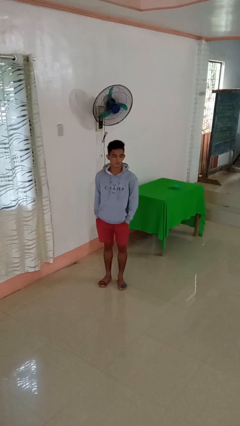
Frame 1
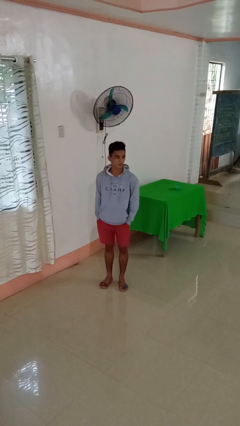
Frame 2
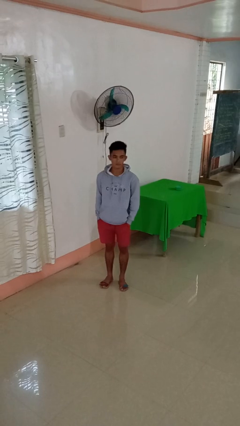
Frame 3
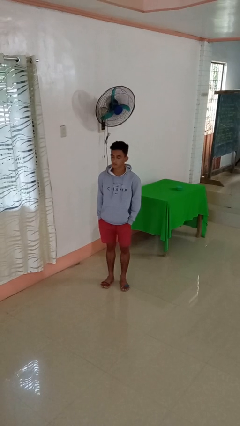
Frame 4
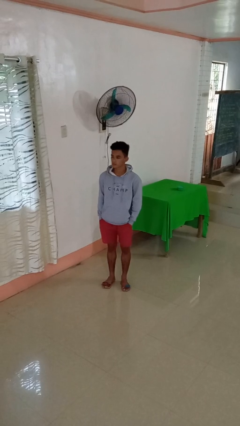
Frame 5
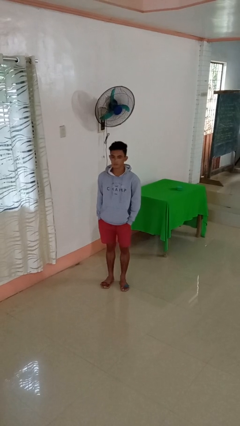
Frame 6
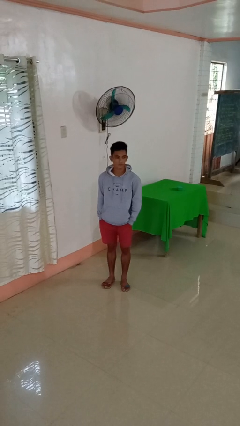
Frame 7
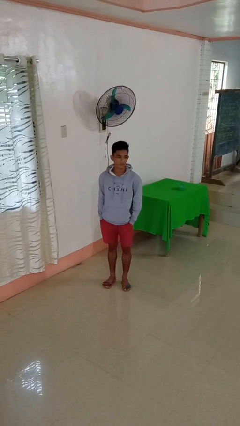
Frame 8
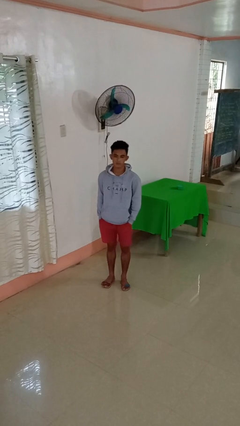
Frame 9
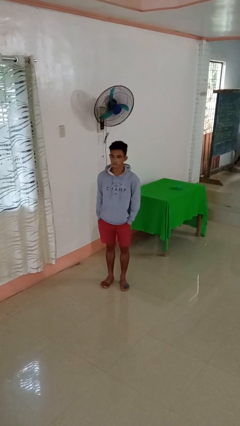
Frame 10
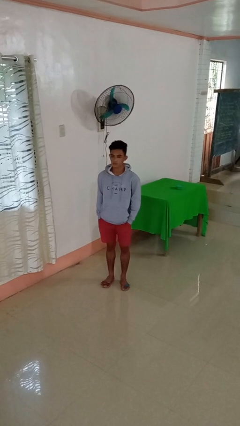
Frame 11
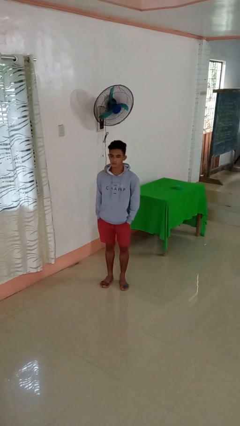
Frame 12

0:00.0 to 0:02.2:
person shakes head

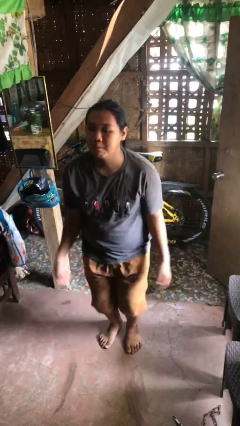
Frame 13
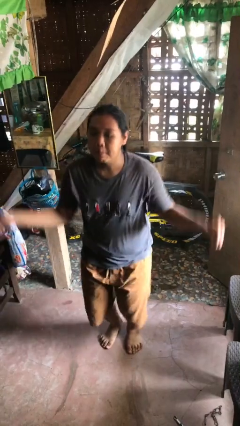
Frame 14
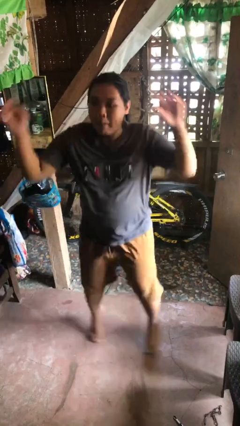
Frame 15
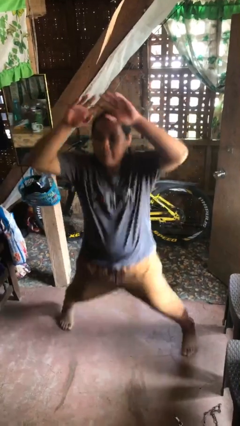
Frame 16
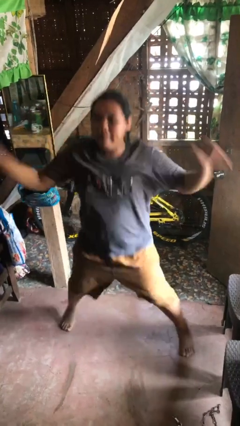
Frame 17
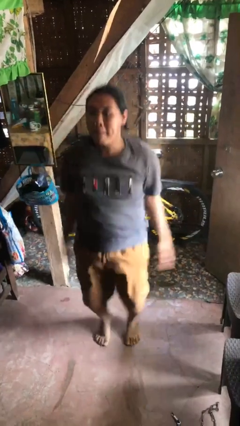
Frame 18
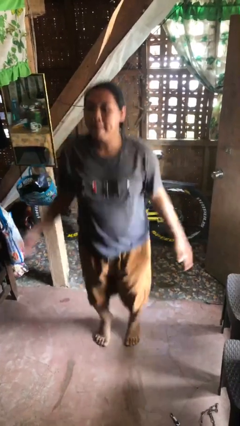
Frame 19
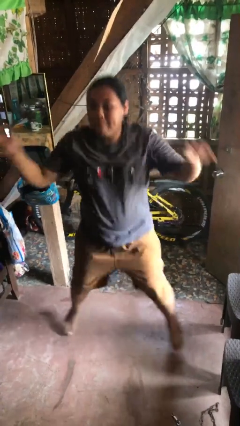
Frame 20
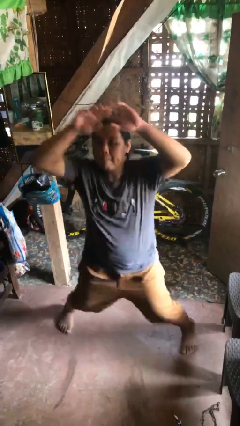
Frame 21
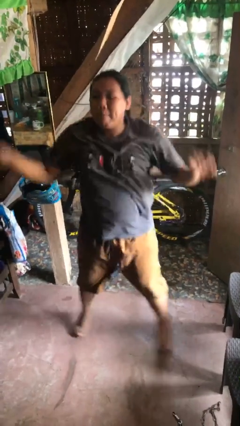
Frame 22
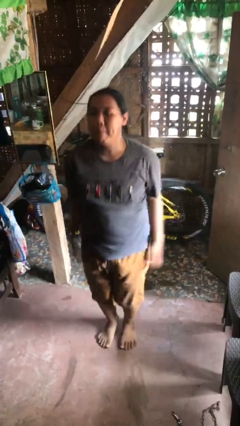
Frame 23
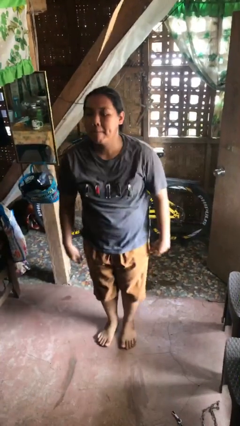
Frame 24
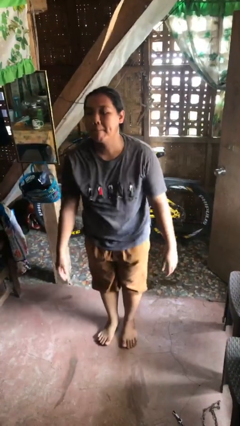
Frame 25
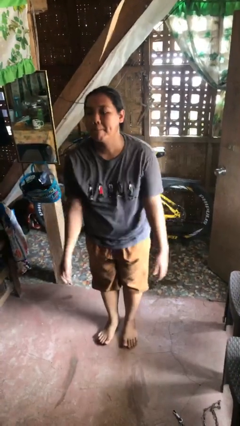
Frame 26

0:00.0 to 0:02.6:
person exercises with jumping jacks

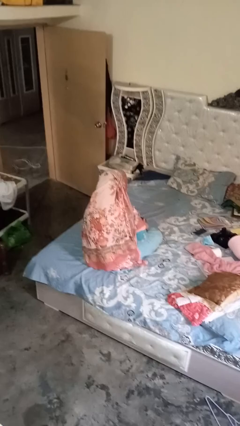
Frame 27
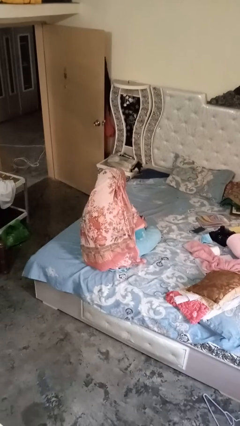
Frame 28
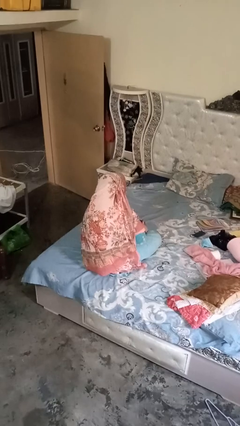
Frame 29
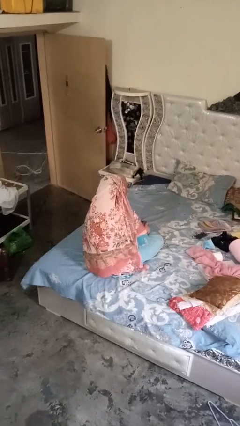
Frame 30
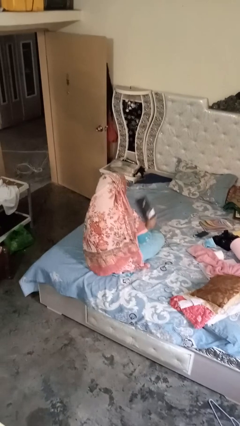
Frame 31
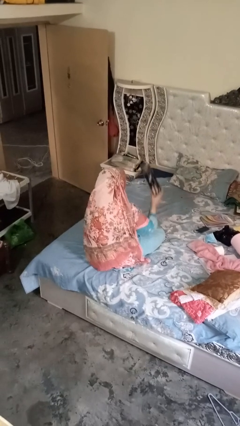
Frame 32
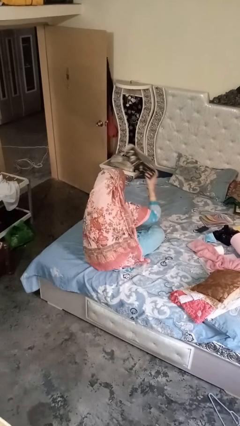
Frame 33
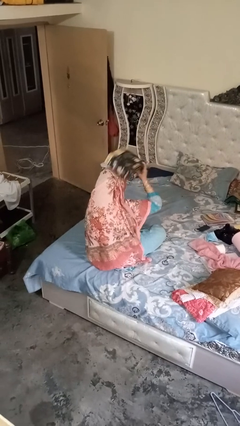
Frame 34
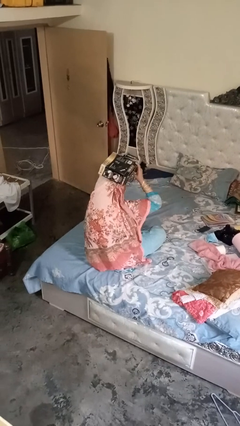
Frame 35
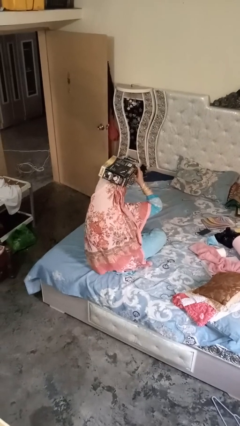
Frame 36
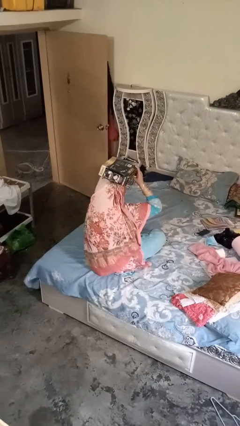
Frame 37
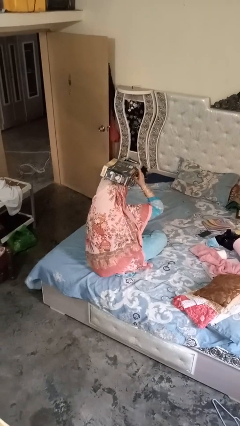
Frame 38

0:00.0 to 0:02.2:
person holds object above head

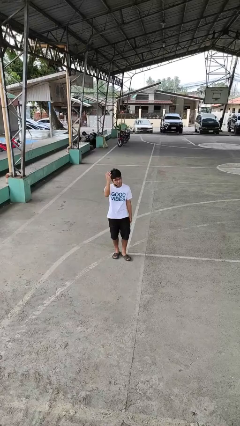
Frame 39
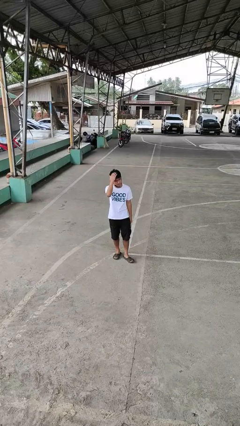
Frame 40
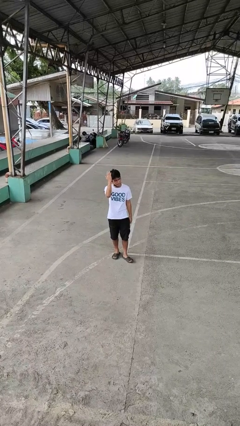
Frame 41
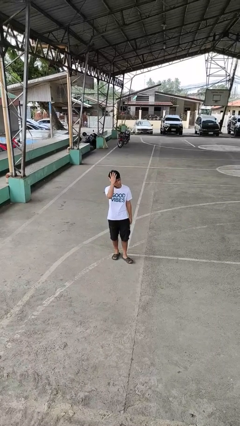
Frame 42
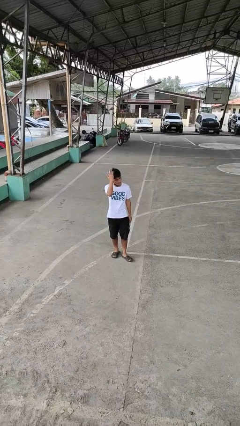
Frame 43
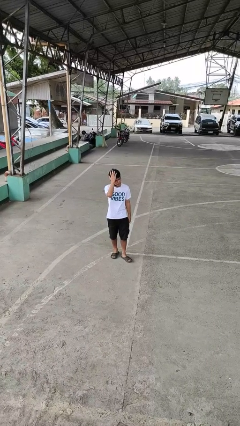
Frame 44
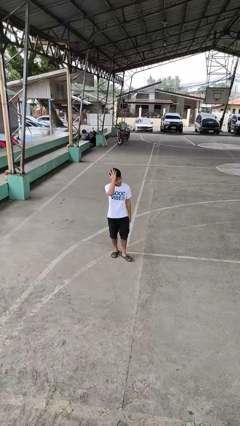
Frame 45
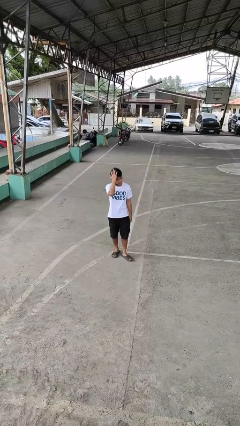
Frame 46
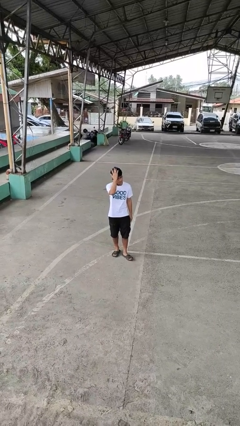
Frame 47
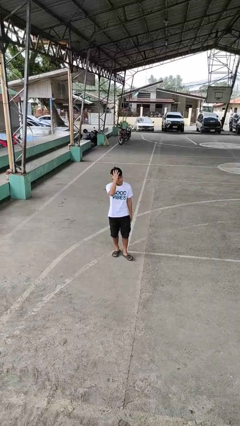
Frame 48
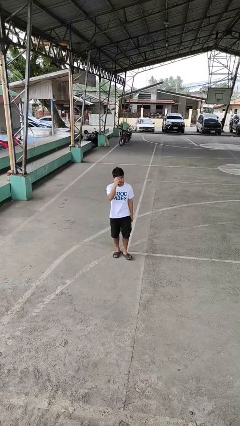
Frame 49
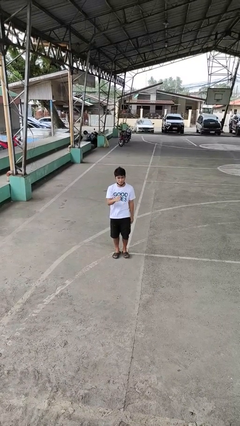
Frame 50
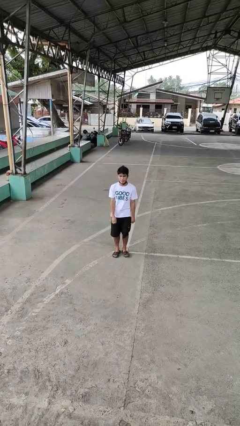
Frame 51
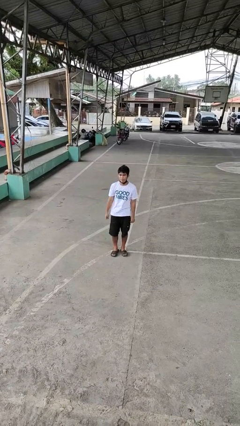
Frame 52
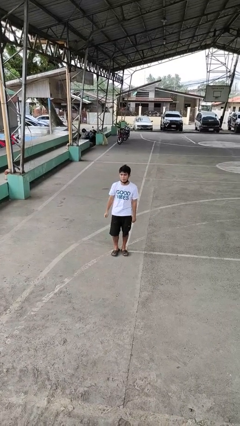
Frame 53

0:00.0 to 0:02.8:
person pats head

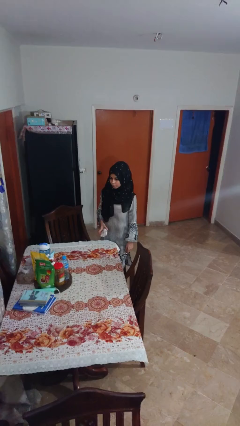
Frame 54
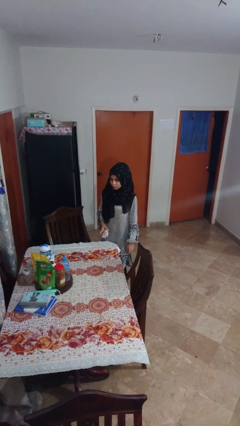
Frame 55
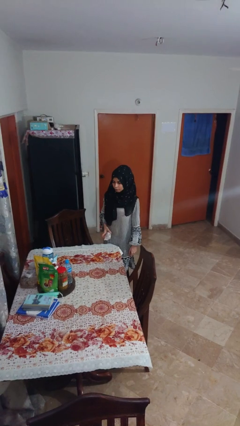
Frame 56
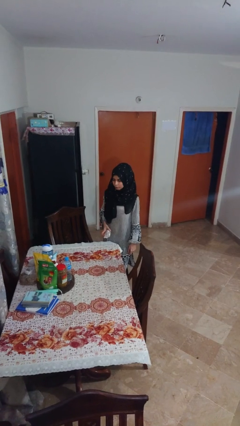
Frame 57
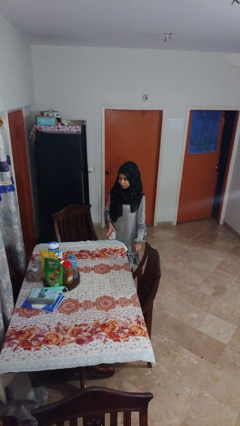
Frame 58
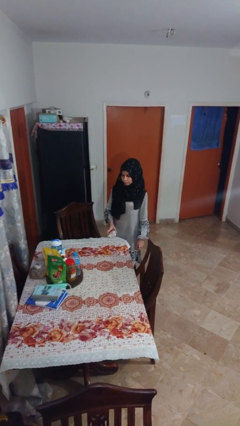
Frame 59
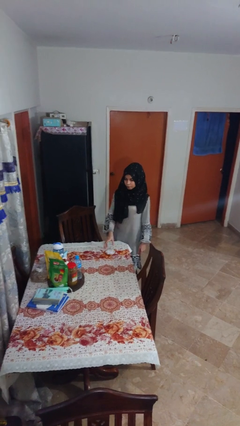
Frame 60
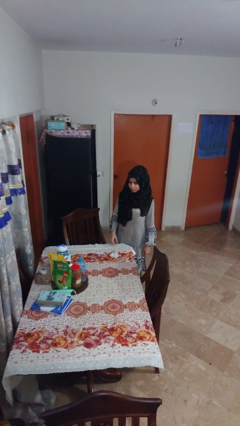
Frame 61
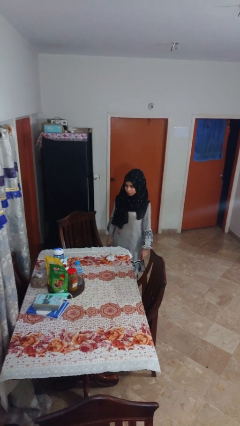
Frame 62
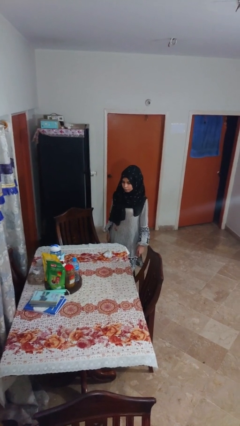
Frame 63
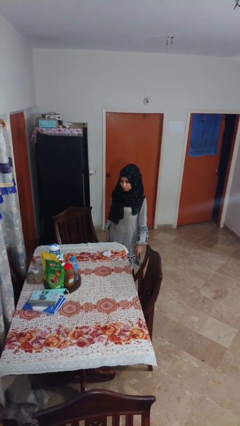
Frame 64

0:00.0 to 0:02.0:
person throws object on table

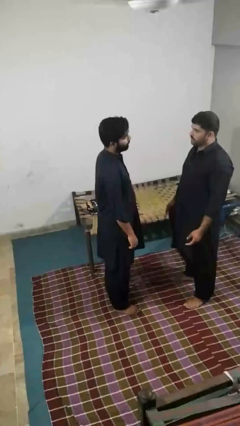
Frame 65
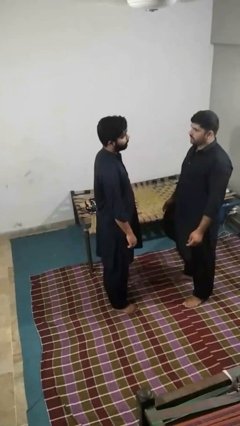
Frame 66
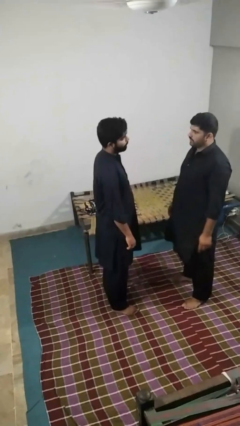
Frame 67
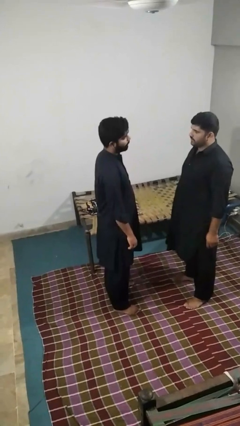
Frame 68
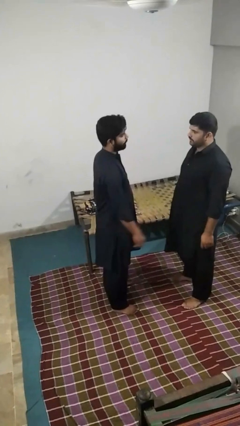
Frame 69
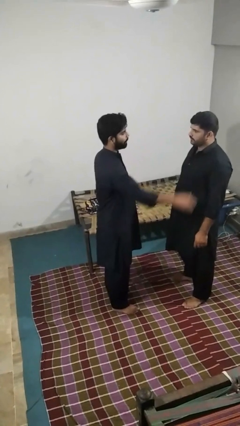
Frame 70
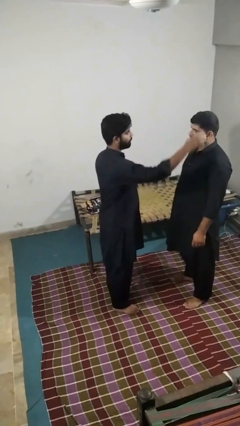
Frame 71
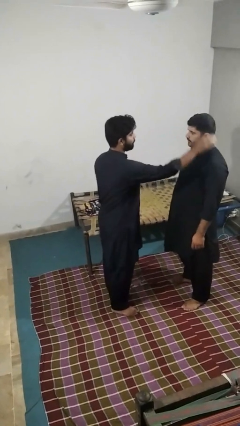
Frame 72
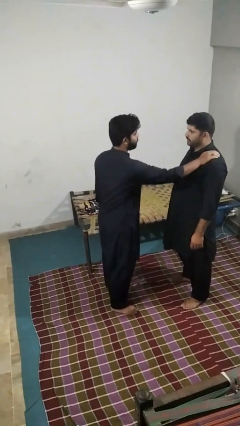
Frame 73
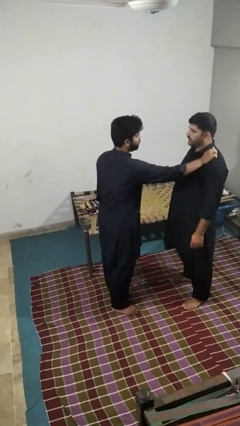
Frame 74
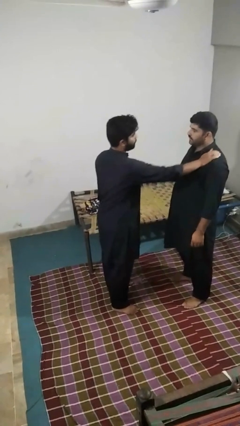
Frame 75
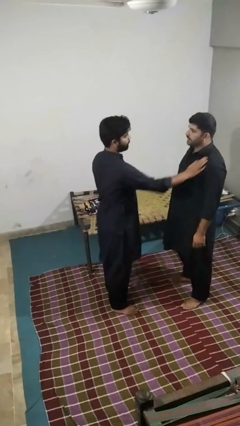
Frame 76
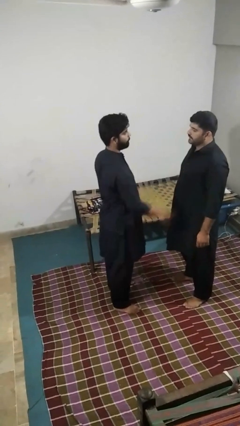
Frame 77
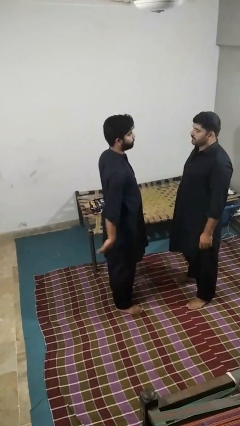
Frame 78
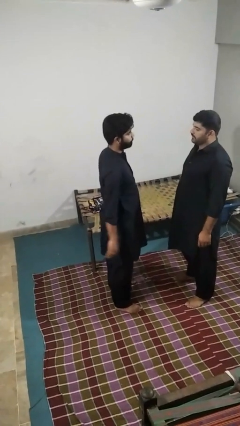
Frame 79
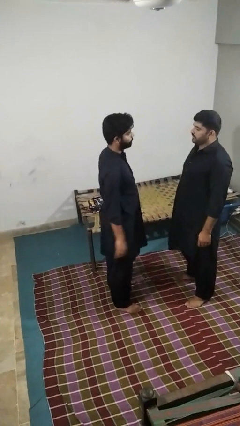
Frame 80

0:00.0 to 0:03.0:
person pounds shoulders of person

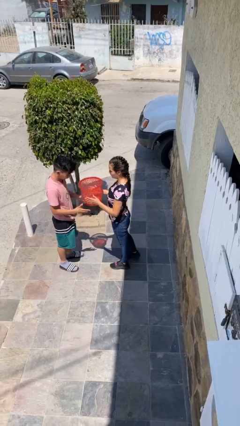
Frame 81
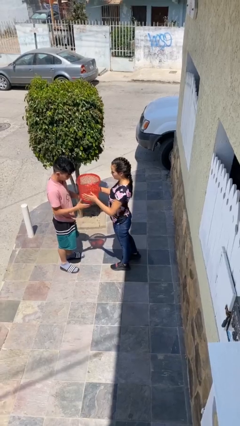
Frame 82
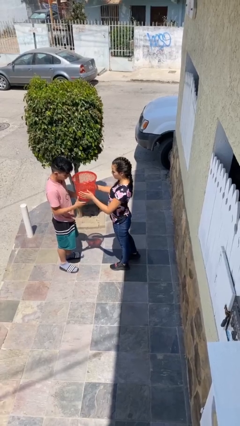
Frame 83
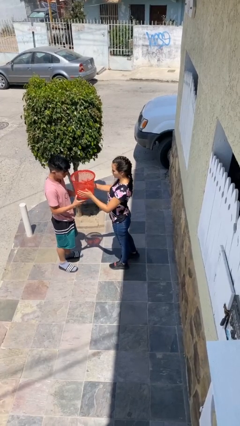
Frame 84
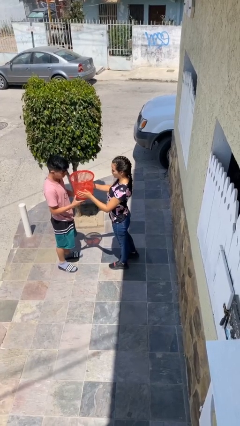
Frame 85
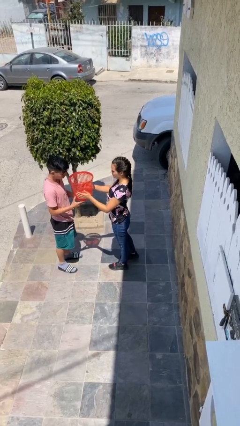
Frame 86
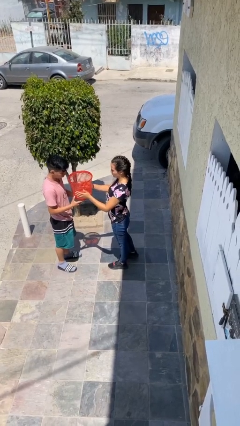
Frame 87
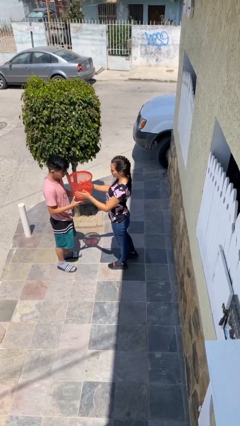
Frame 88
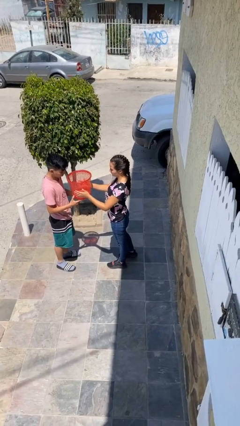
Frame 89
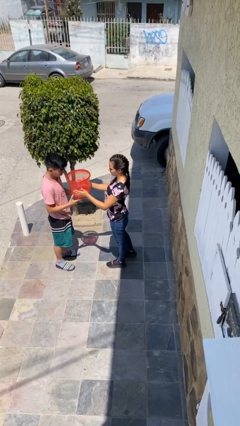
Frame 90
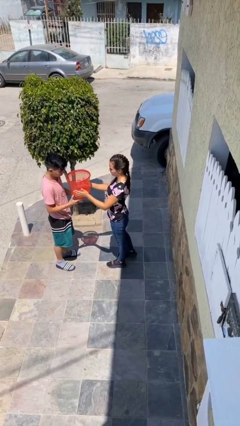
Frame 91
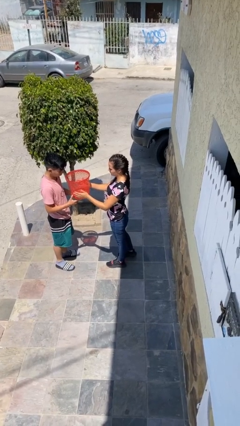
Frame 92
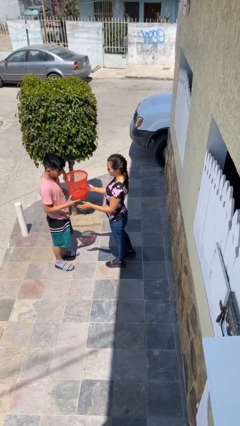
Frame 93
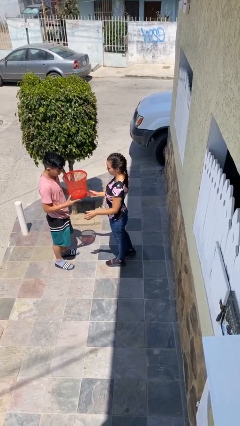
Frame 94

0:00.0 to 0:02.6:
person transfers object to person
